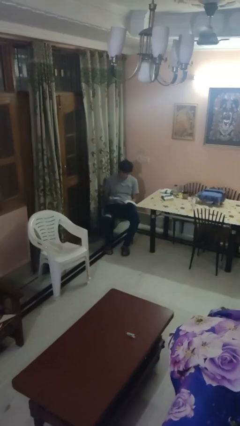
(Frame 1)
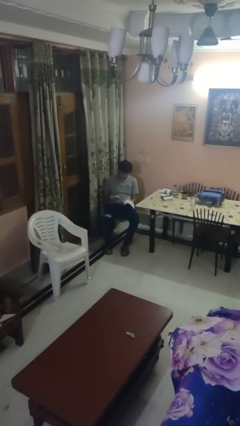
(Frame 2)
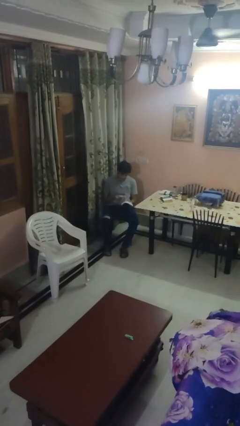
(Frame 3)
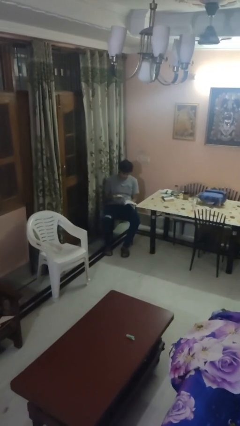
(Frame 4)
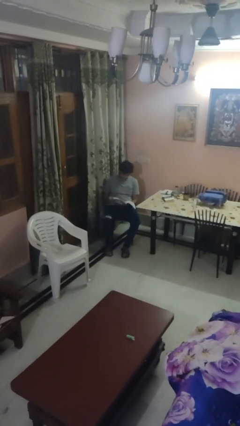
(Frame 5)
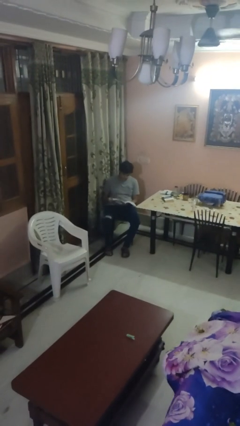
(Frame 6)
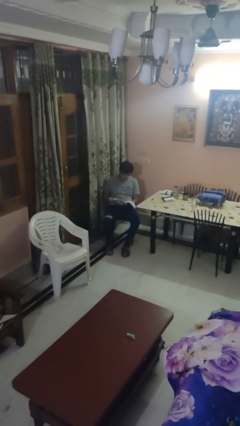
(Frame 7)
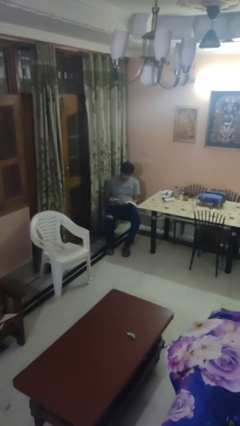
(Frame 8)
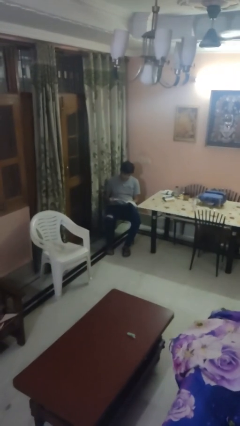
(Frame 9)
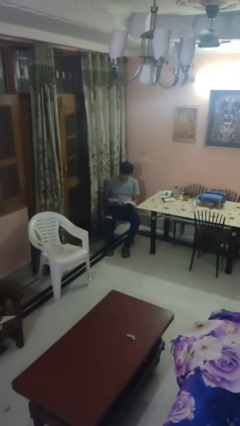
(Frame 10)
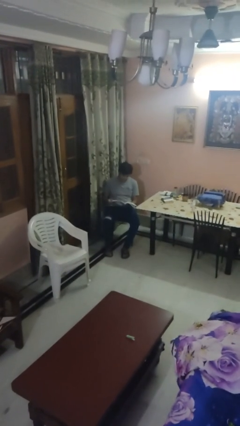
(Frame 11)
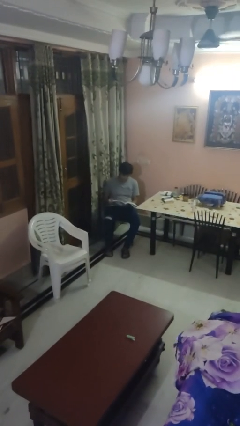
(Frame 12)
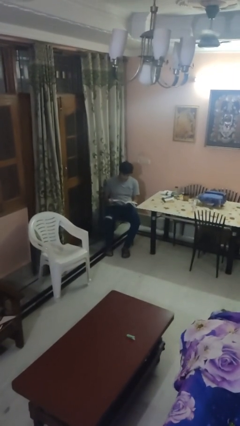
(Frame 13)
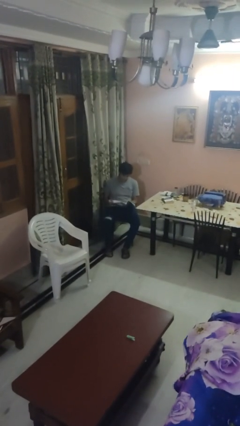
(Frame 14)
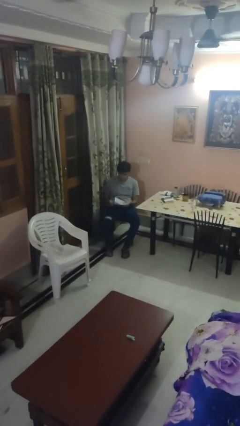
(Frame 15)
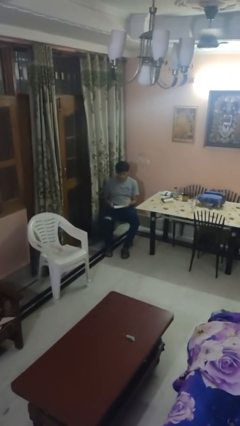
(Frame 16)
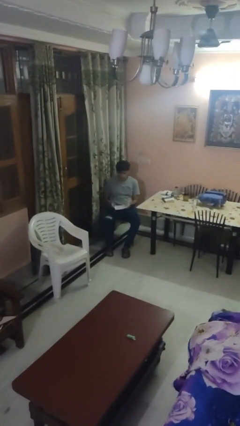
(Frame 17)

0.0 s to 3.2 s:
person reads magazine

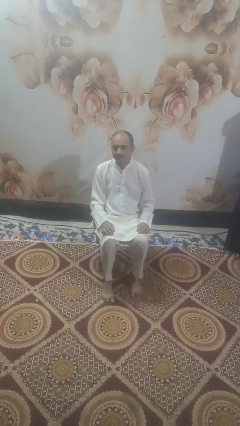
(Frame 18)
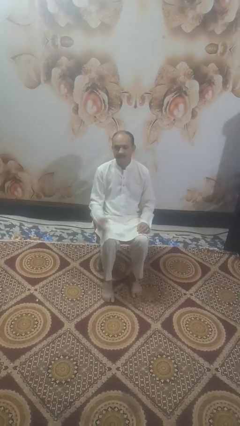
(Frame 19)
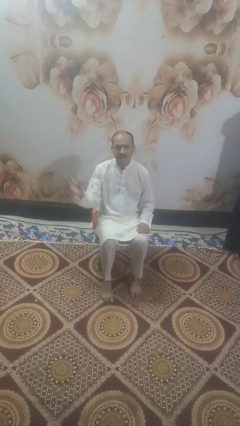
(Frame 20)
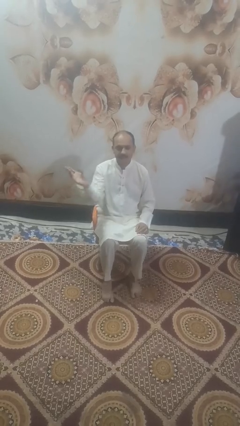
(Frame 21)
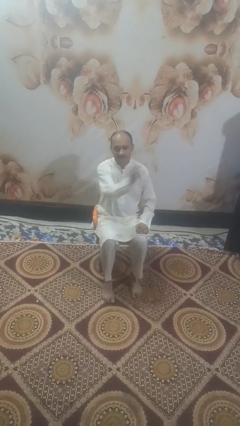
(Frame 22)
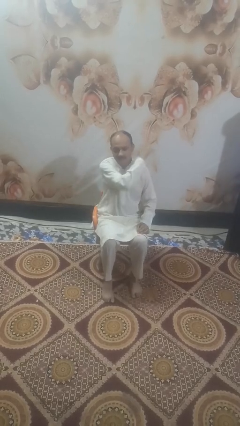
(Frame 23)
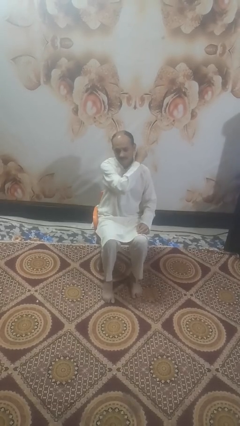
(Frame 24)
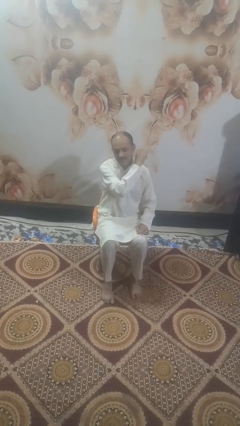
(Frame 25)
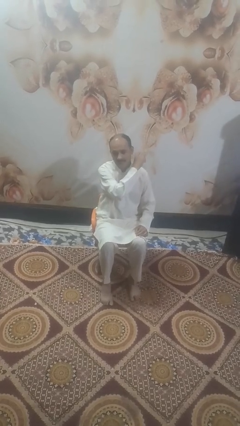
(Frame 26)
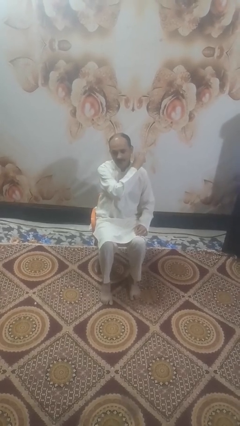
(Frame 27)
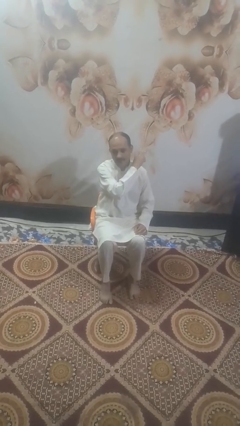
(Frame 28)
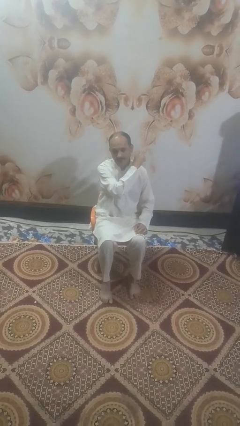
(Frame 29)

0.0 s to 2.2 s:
person gestures swipe left

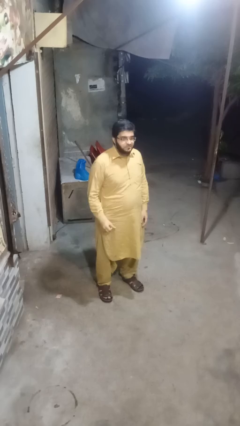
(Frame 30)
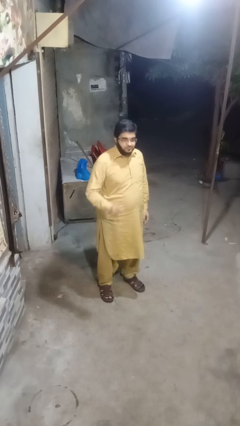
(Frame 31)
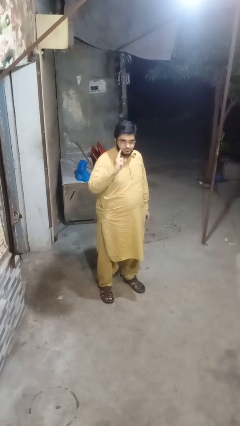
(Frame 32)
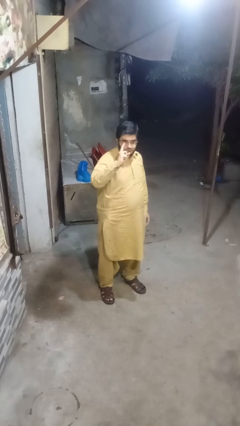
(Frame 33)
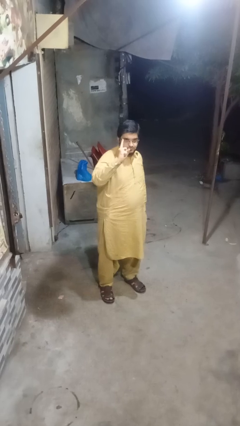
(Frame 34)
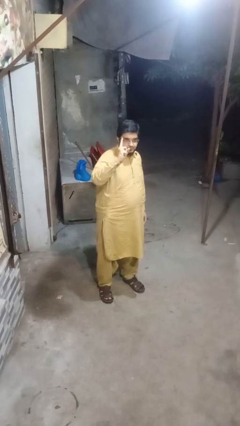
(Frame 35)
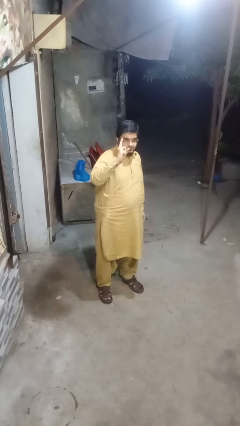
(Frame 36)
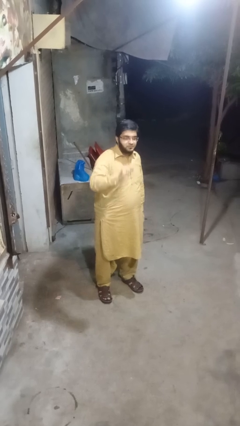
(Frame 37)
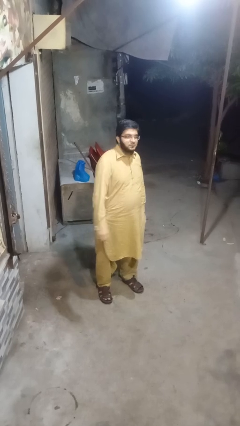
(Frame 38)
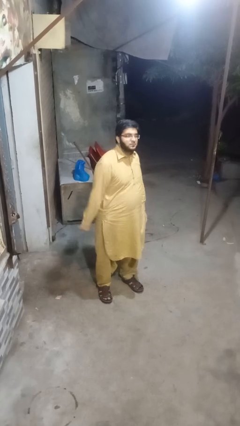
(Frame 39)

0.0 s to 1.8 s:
person gestures number one

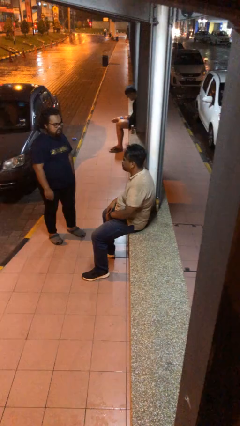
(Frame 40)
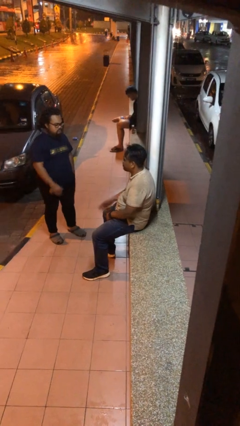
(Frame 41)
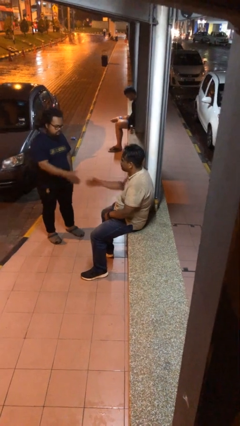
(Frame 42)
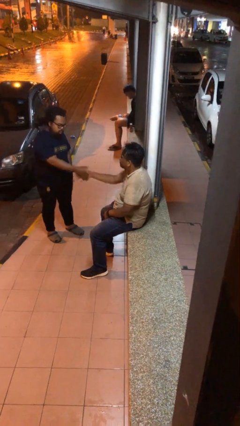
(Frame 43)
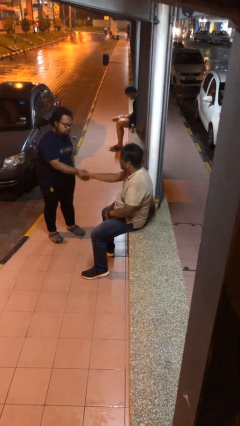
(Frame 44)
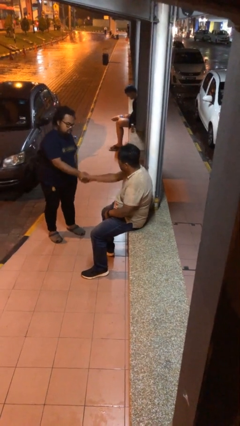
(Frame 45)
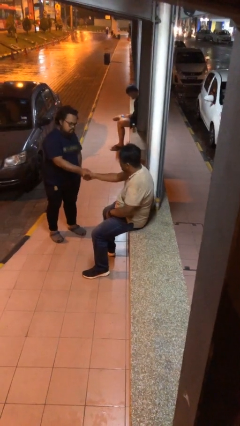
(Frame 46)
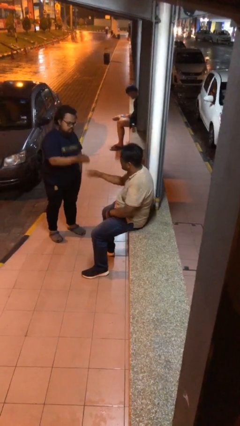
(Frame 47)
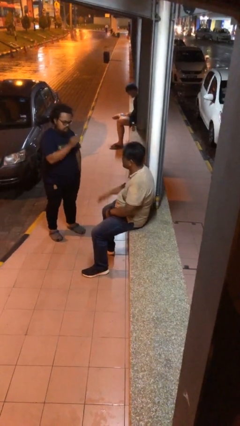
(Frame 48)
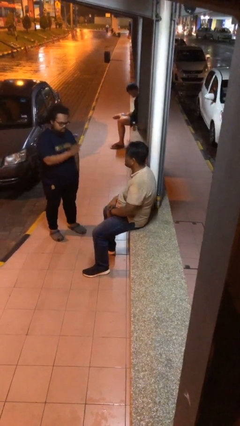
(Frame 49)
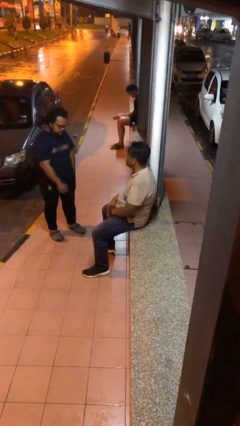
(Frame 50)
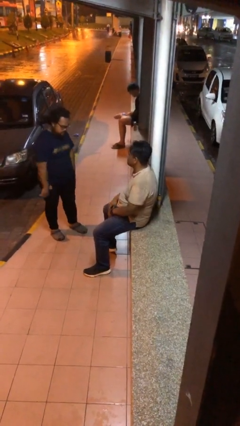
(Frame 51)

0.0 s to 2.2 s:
person shakes hand

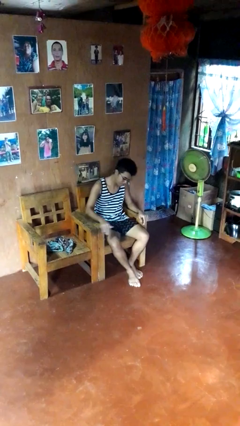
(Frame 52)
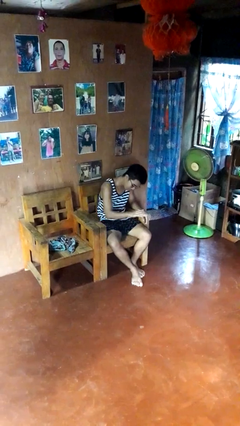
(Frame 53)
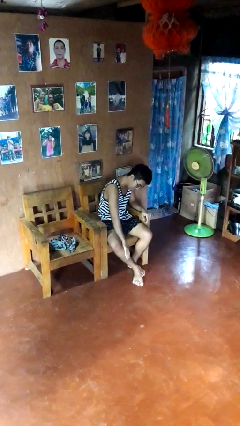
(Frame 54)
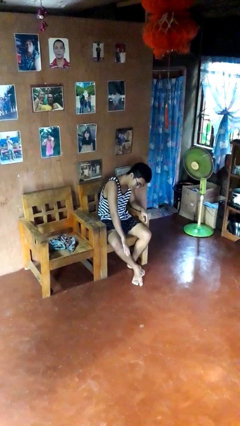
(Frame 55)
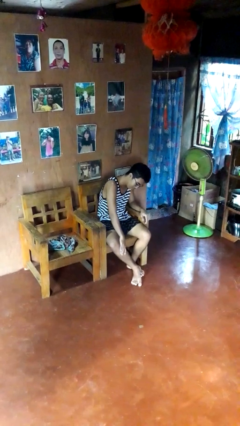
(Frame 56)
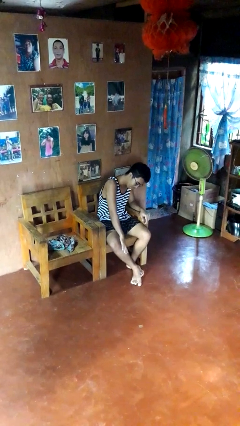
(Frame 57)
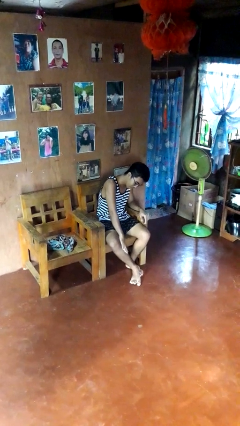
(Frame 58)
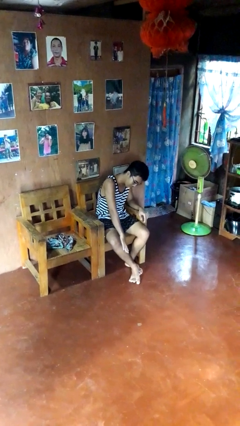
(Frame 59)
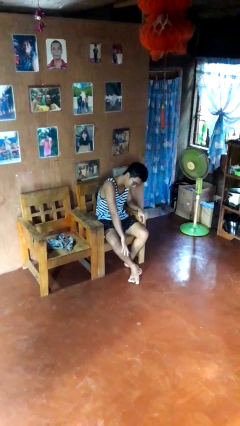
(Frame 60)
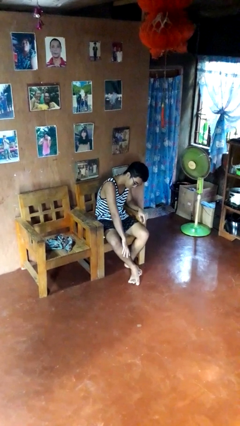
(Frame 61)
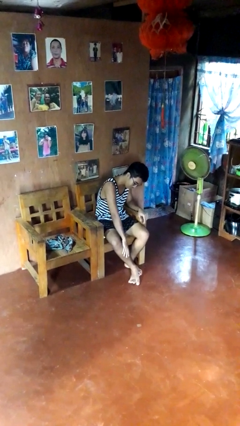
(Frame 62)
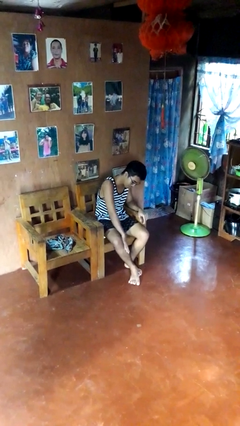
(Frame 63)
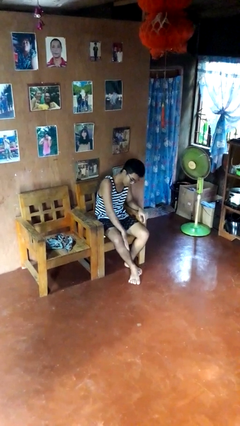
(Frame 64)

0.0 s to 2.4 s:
person swats bug

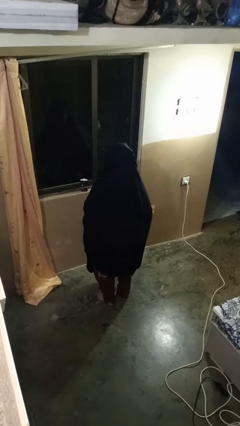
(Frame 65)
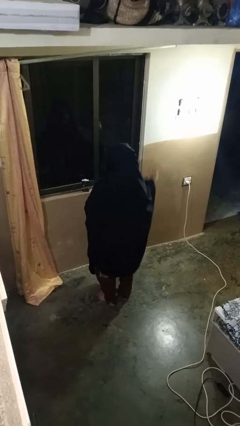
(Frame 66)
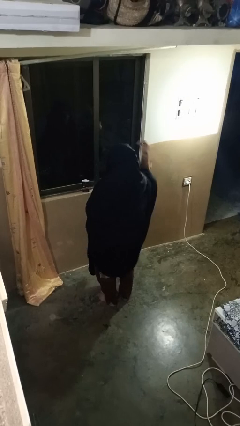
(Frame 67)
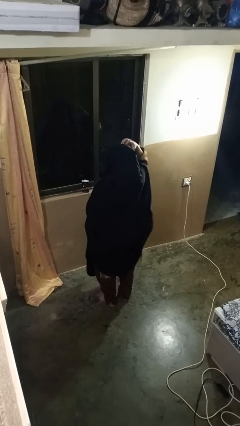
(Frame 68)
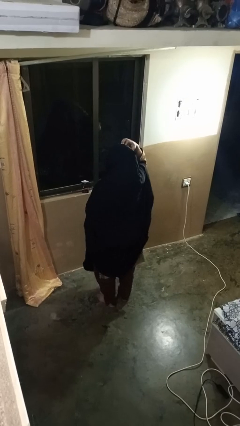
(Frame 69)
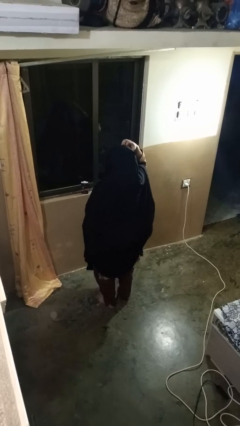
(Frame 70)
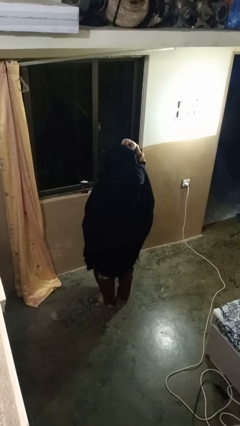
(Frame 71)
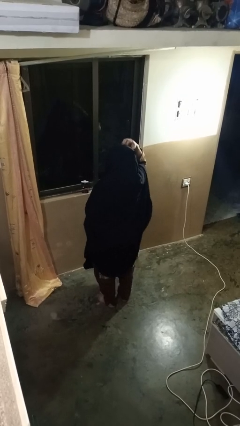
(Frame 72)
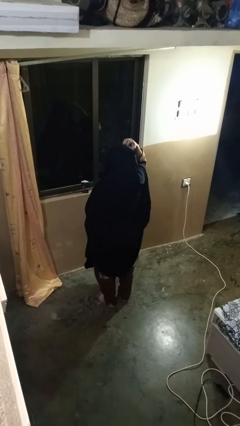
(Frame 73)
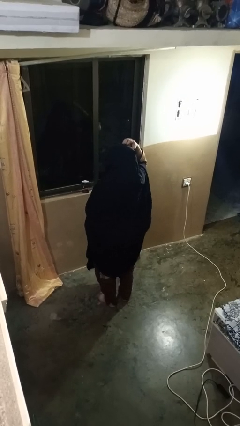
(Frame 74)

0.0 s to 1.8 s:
person scratches face

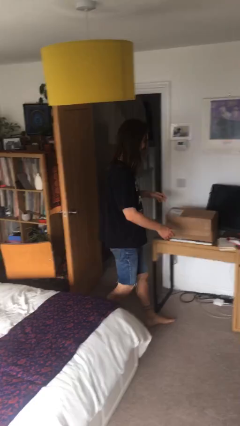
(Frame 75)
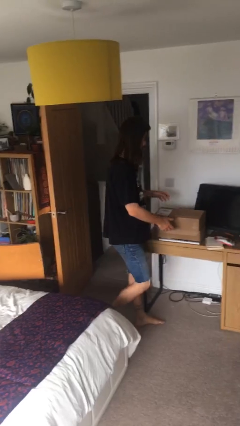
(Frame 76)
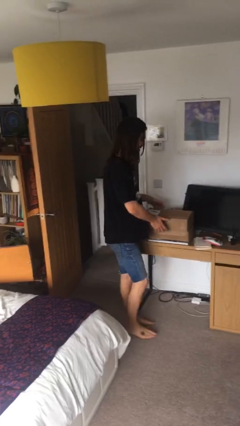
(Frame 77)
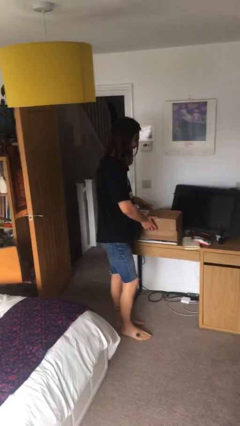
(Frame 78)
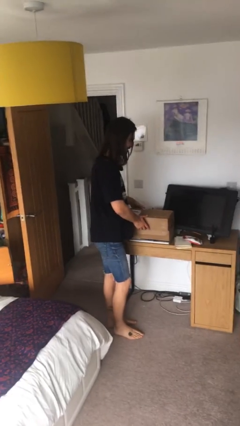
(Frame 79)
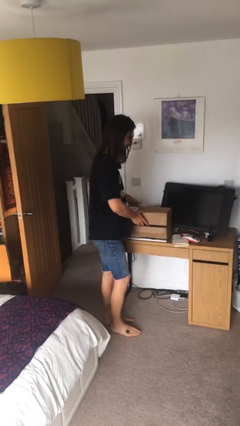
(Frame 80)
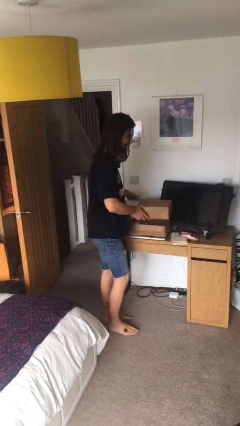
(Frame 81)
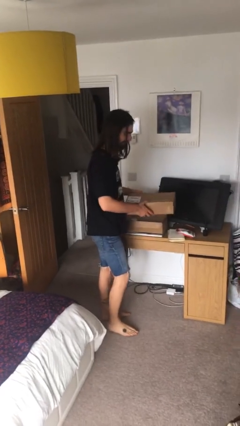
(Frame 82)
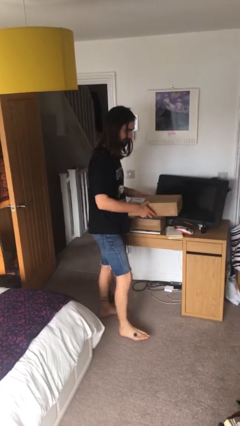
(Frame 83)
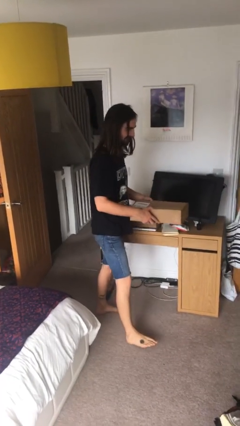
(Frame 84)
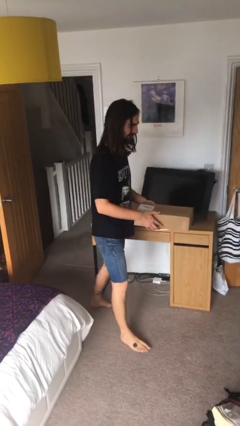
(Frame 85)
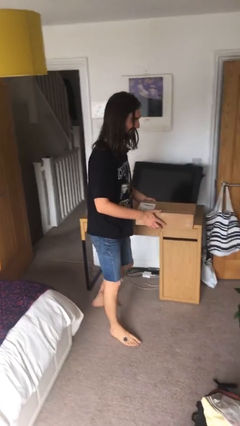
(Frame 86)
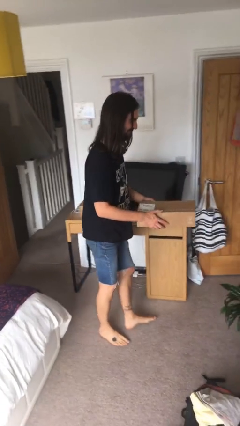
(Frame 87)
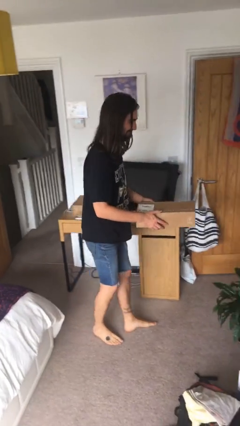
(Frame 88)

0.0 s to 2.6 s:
person picks up object from table

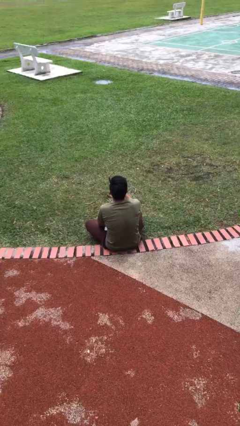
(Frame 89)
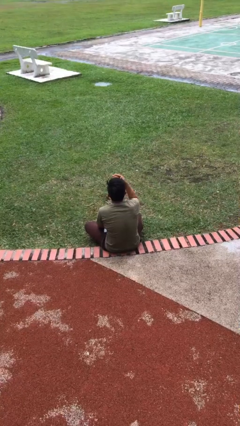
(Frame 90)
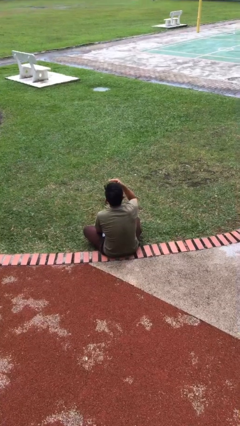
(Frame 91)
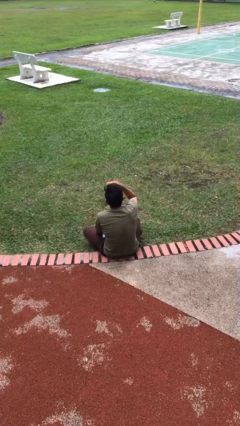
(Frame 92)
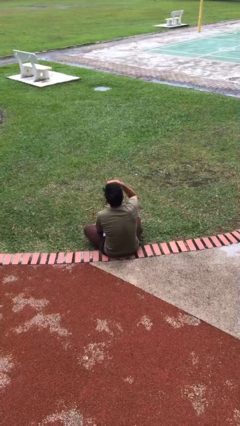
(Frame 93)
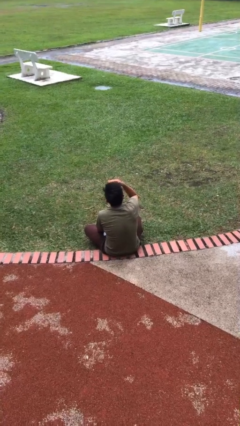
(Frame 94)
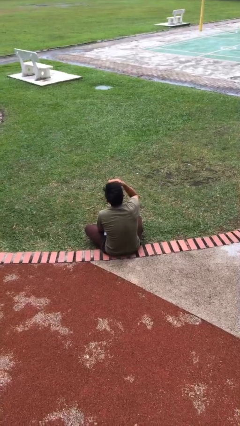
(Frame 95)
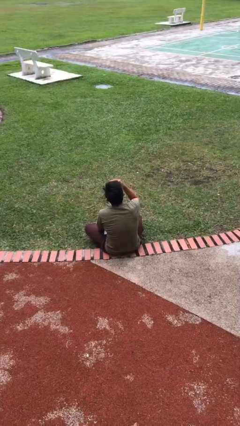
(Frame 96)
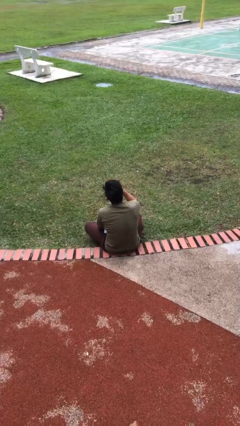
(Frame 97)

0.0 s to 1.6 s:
person shades eyes
